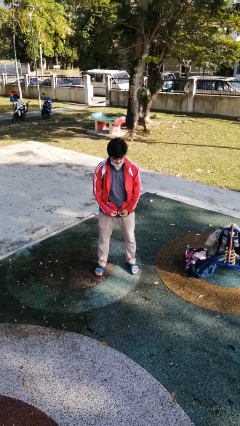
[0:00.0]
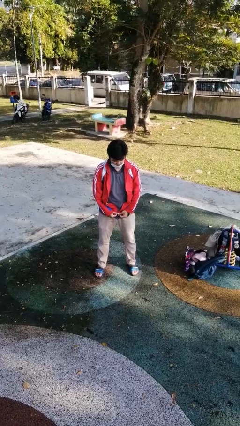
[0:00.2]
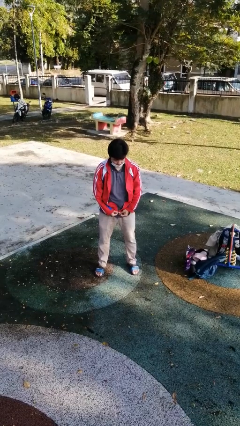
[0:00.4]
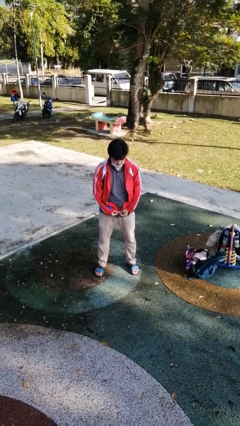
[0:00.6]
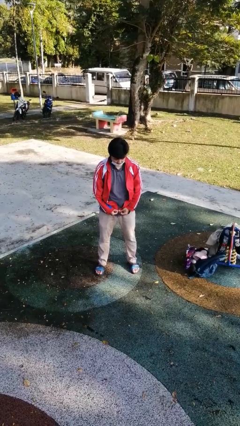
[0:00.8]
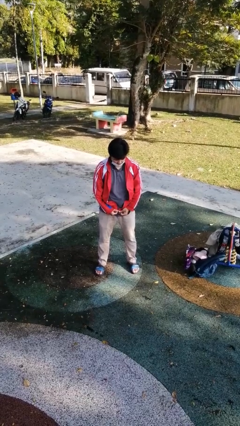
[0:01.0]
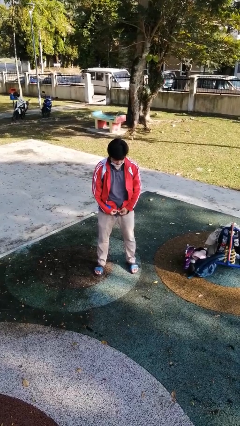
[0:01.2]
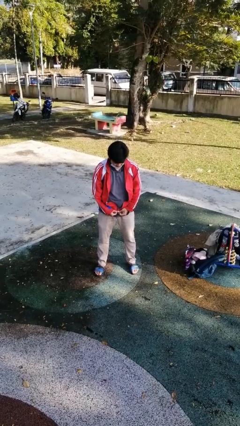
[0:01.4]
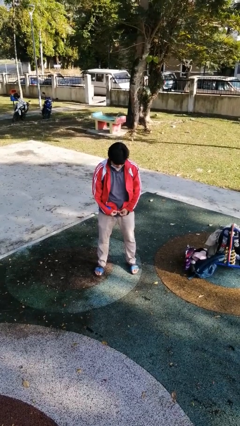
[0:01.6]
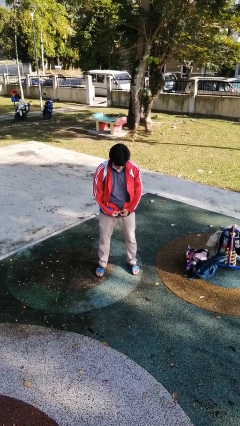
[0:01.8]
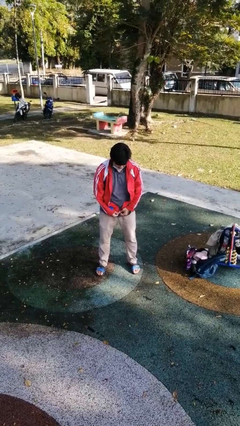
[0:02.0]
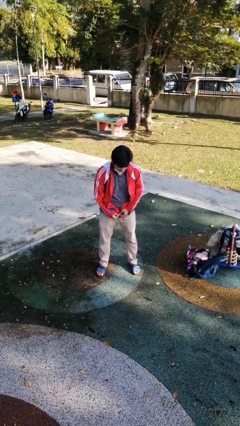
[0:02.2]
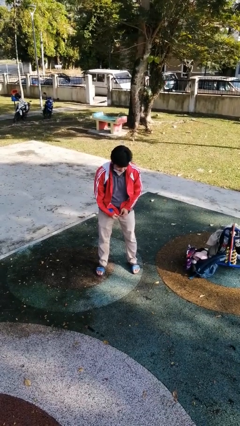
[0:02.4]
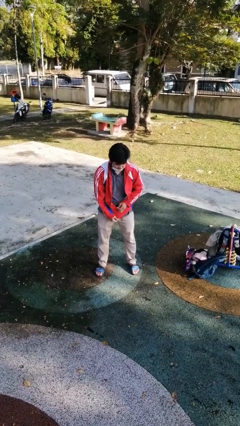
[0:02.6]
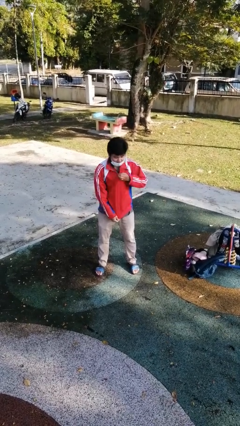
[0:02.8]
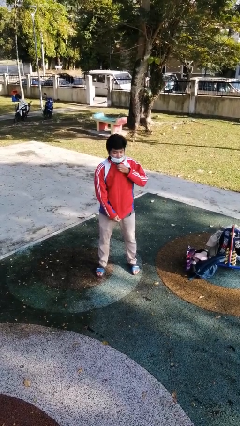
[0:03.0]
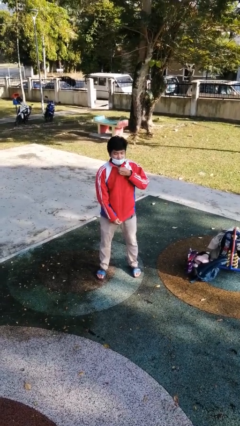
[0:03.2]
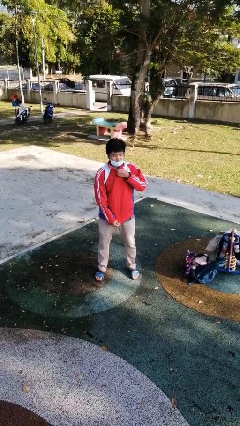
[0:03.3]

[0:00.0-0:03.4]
person zips up jacket

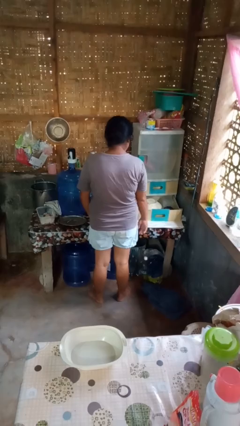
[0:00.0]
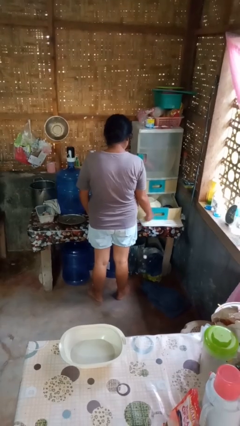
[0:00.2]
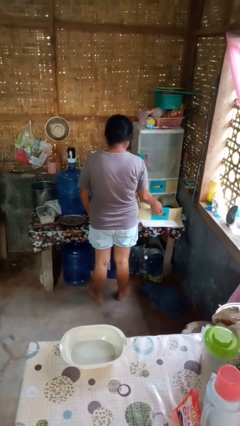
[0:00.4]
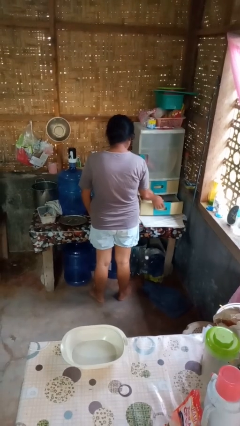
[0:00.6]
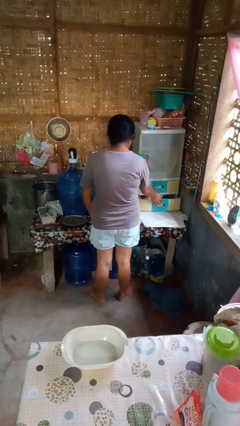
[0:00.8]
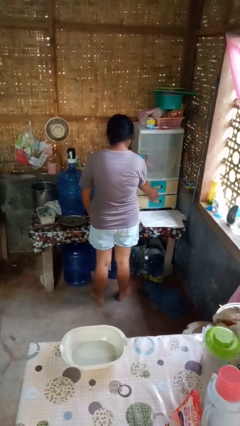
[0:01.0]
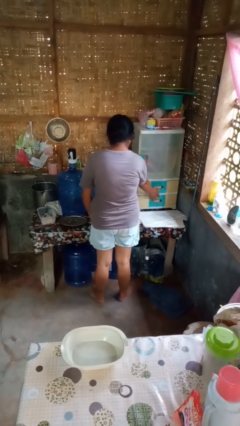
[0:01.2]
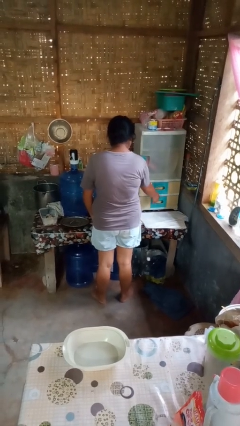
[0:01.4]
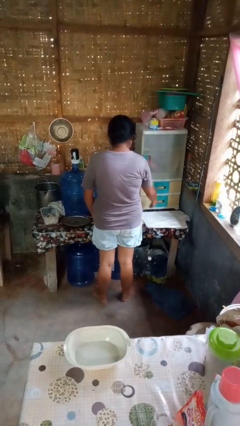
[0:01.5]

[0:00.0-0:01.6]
person closes kitchen drawer

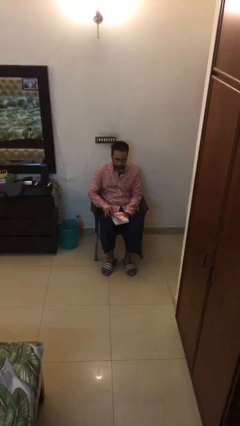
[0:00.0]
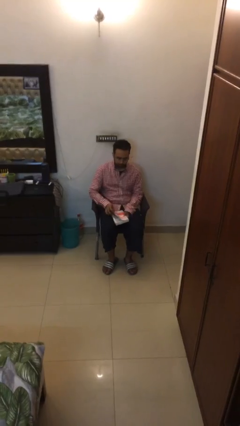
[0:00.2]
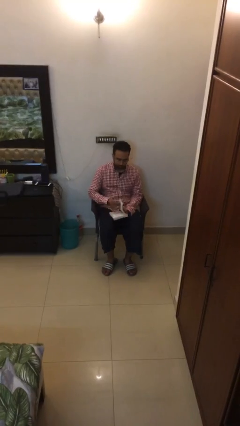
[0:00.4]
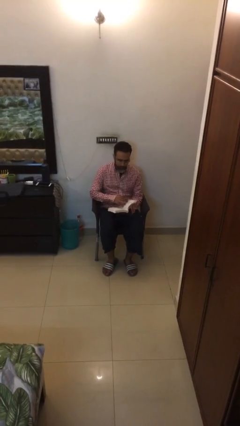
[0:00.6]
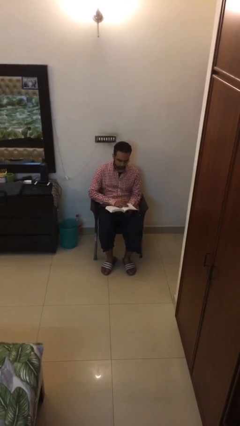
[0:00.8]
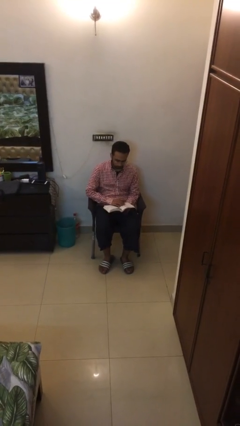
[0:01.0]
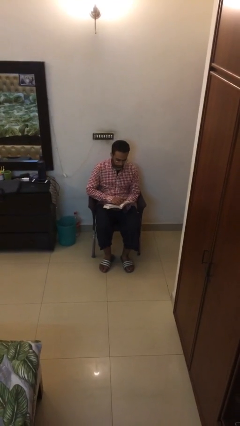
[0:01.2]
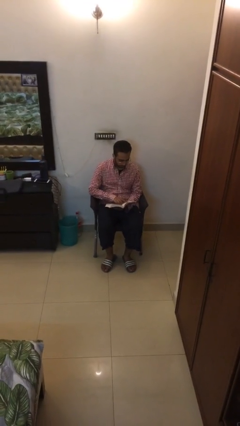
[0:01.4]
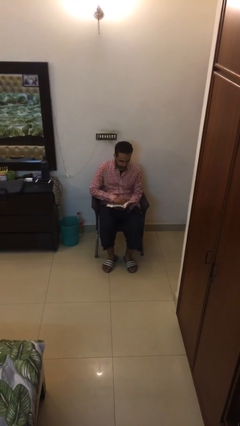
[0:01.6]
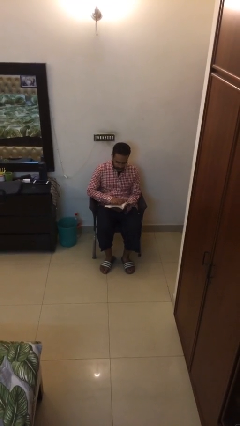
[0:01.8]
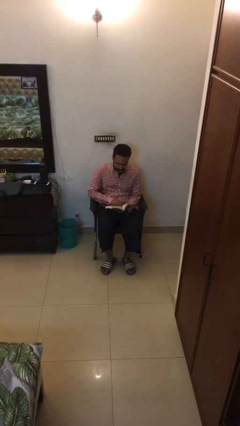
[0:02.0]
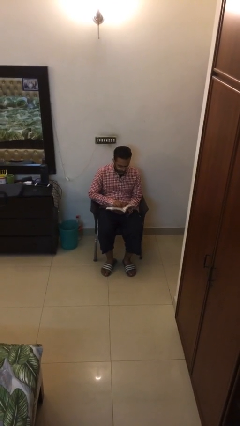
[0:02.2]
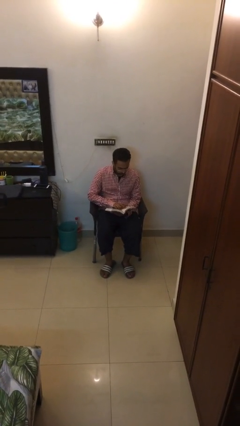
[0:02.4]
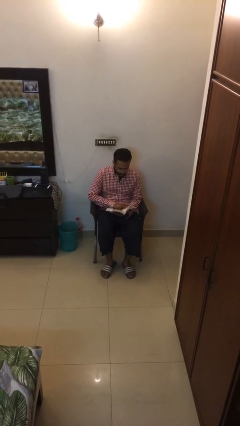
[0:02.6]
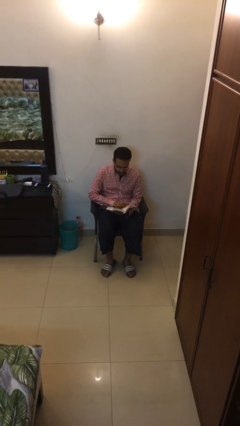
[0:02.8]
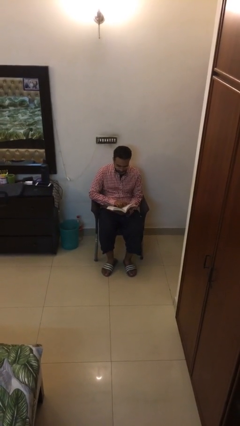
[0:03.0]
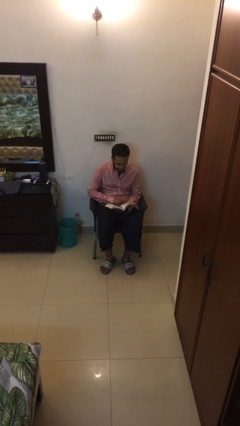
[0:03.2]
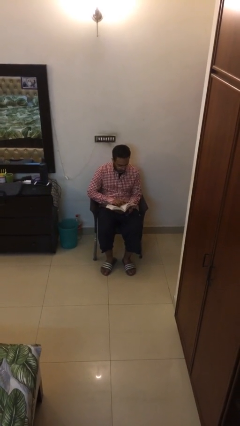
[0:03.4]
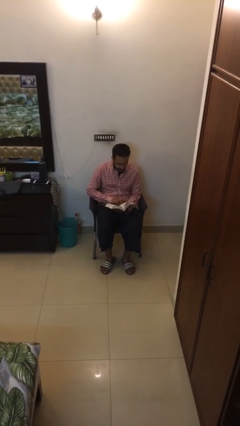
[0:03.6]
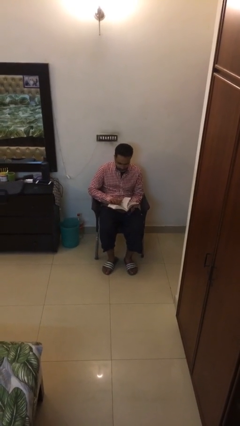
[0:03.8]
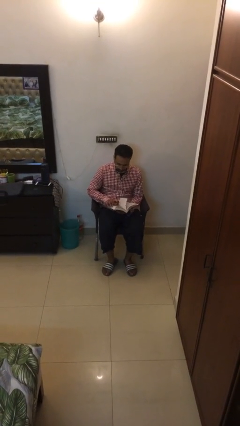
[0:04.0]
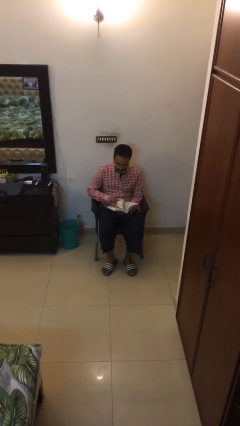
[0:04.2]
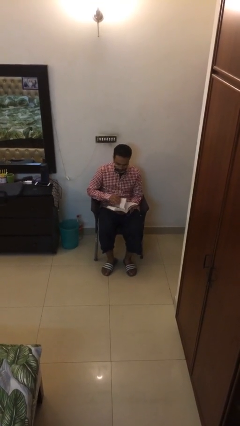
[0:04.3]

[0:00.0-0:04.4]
person reads document

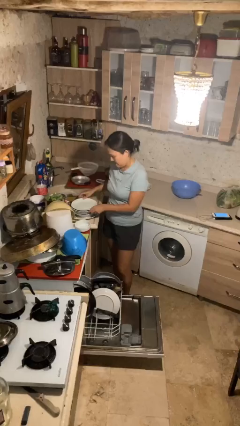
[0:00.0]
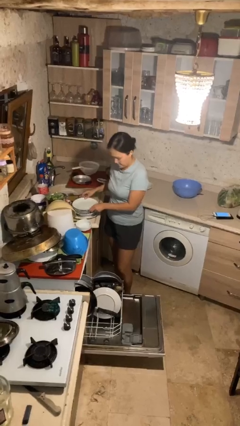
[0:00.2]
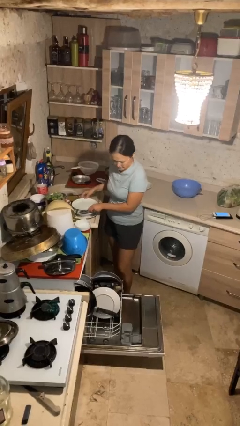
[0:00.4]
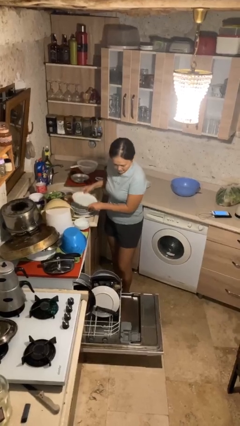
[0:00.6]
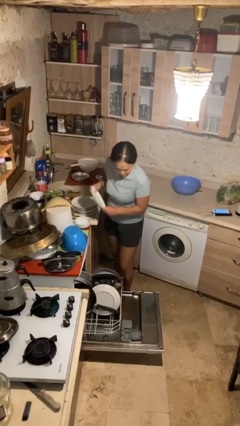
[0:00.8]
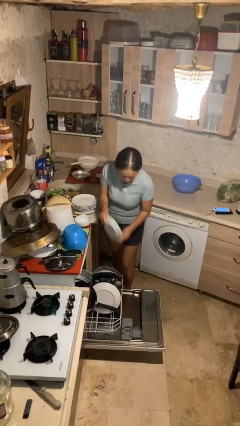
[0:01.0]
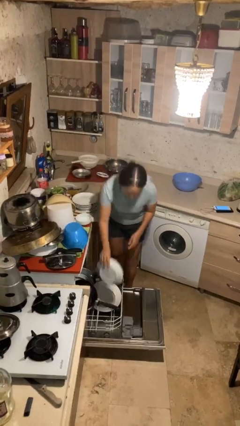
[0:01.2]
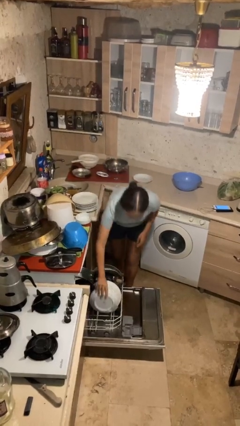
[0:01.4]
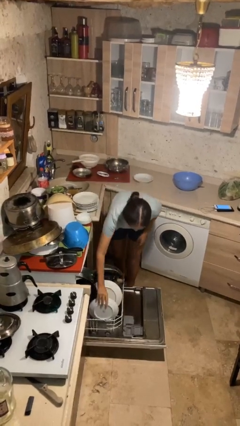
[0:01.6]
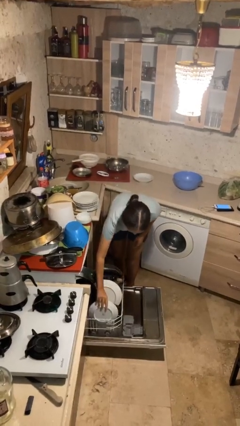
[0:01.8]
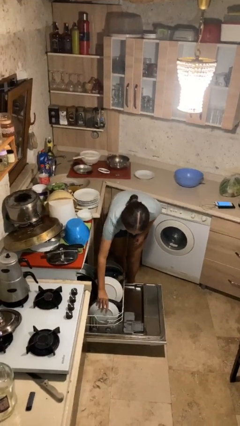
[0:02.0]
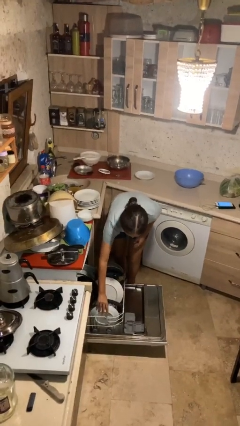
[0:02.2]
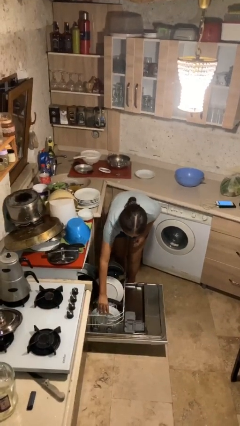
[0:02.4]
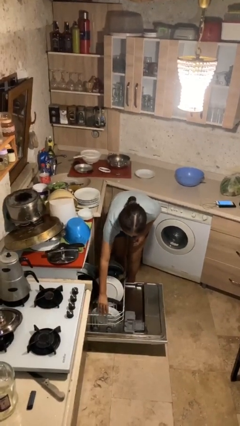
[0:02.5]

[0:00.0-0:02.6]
person loads dishwasher

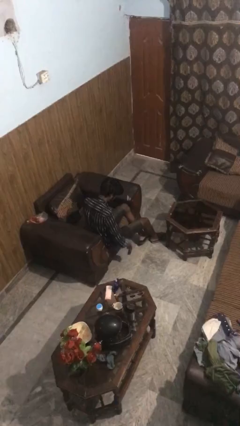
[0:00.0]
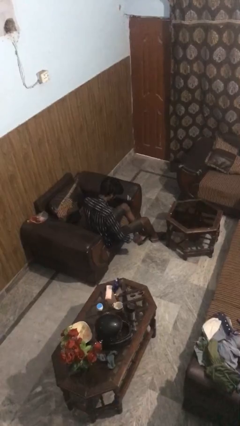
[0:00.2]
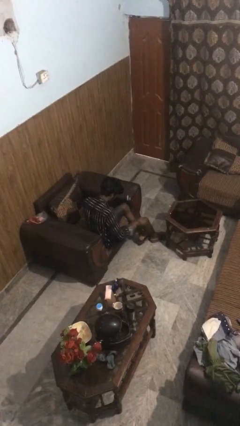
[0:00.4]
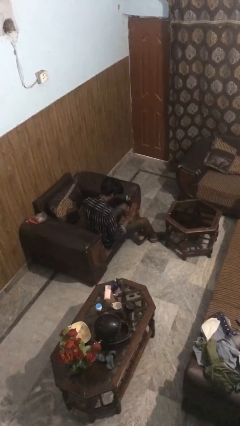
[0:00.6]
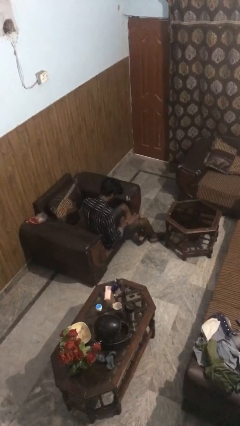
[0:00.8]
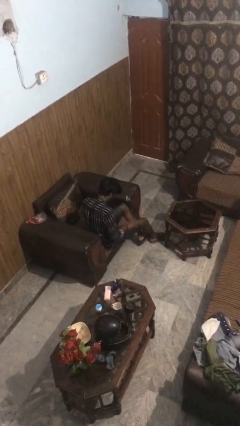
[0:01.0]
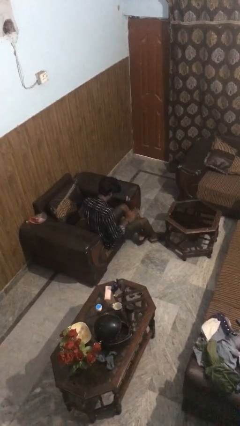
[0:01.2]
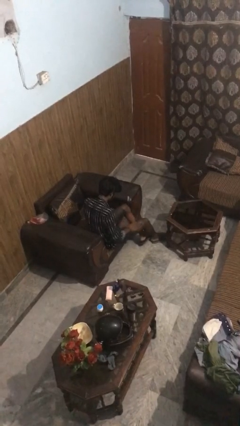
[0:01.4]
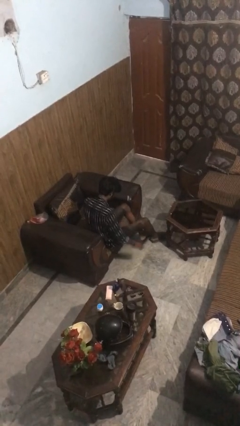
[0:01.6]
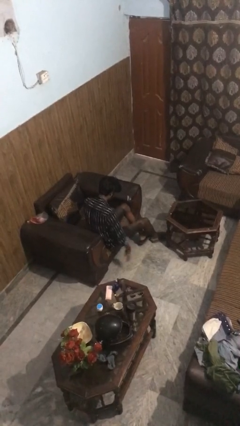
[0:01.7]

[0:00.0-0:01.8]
person slaps hands on thighs

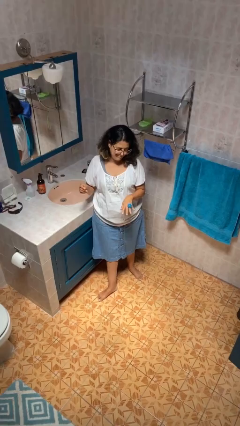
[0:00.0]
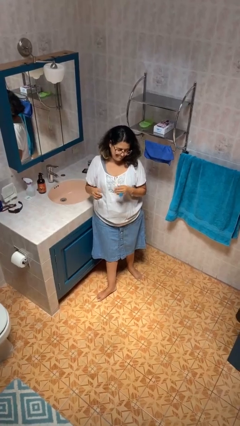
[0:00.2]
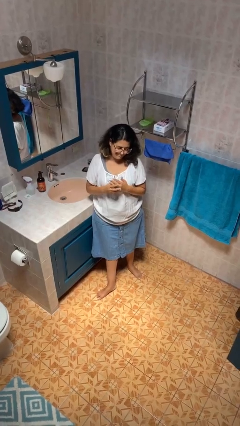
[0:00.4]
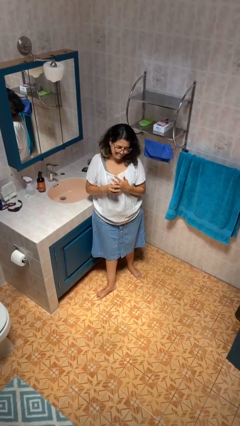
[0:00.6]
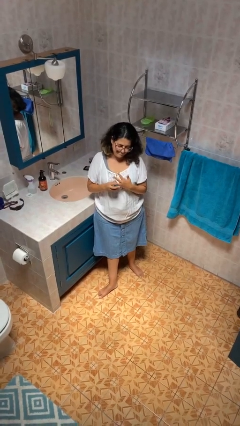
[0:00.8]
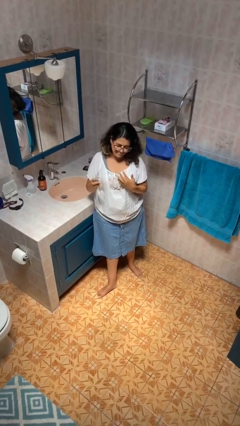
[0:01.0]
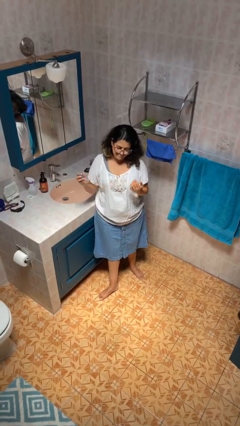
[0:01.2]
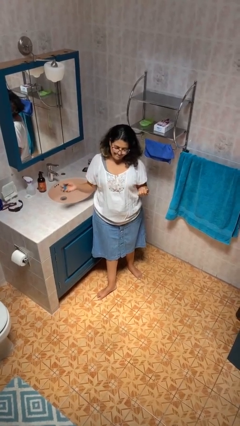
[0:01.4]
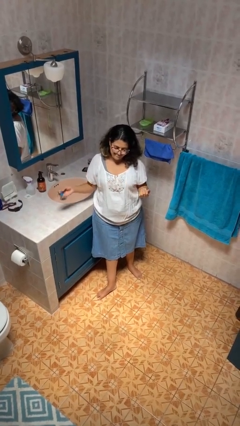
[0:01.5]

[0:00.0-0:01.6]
person takes off ring

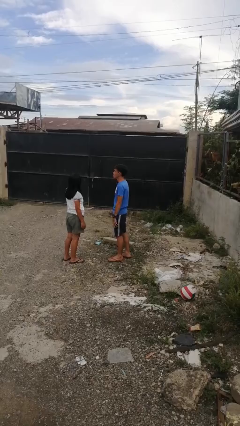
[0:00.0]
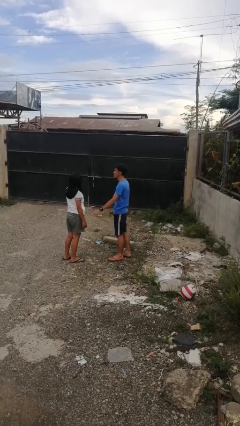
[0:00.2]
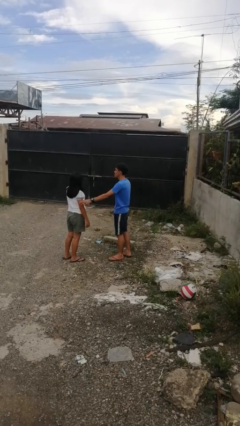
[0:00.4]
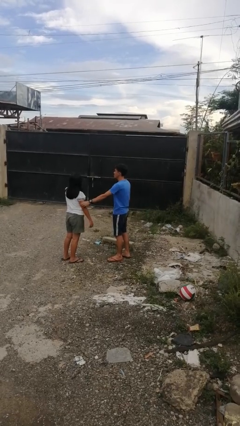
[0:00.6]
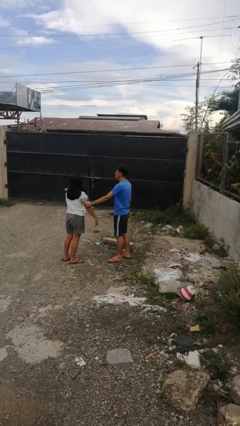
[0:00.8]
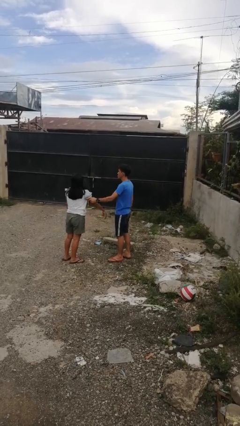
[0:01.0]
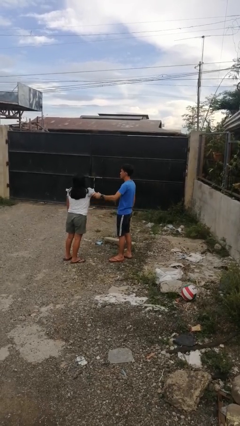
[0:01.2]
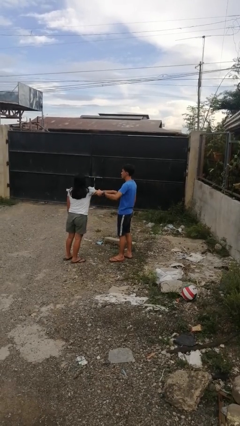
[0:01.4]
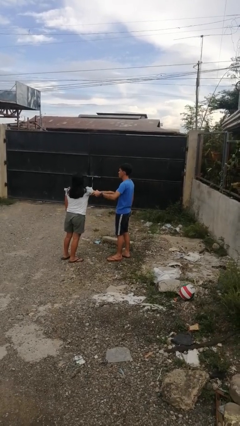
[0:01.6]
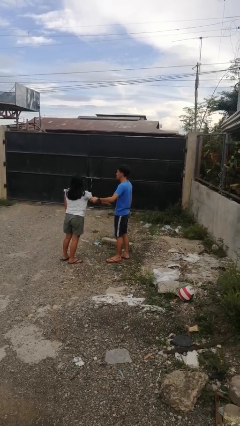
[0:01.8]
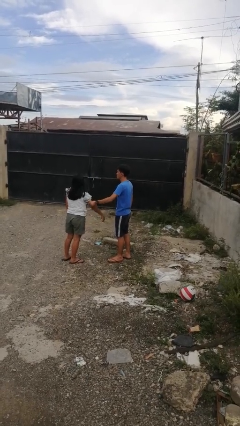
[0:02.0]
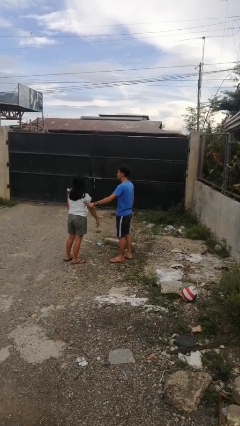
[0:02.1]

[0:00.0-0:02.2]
person grabs person by bicep
